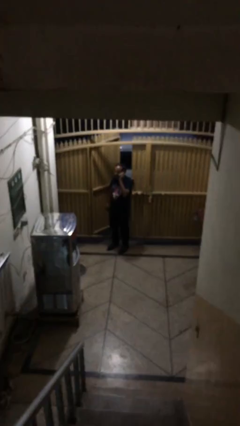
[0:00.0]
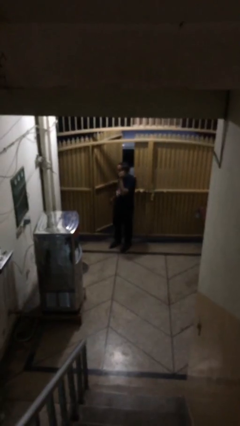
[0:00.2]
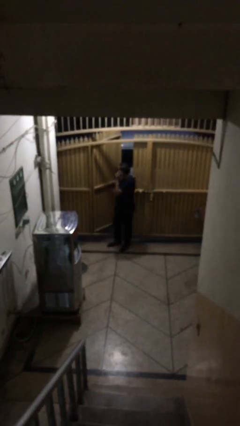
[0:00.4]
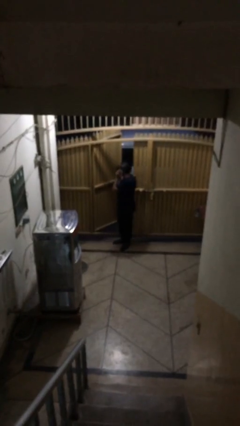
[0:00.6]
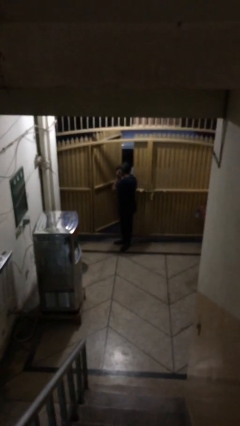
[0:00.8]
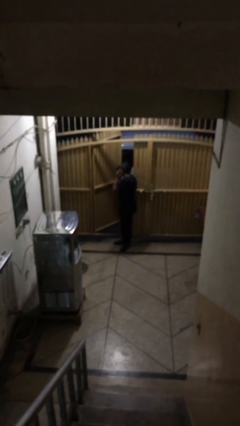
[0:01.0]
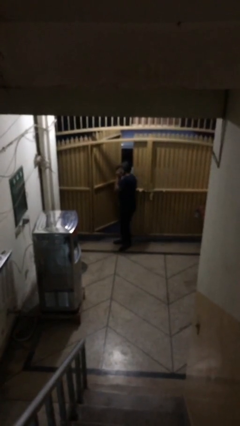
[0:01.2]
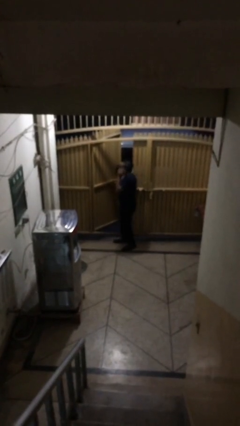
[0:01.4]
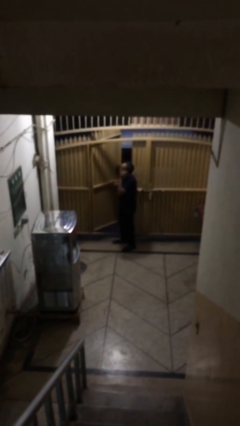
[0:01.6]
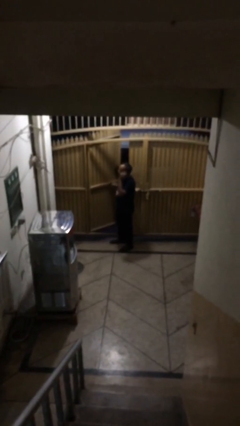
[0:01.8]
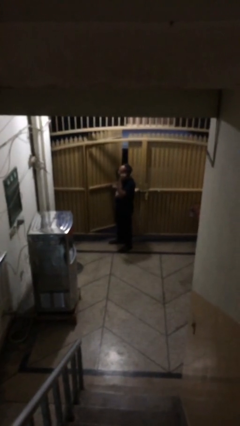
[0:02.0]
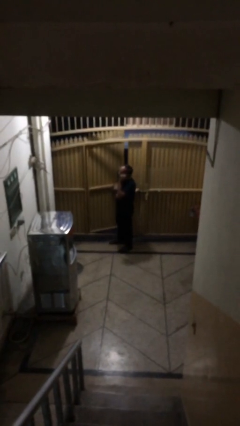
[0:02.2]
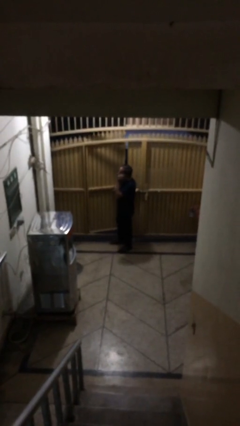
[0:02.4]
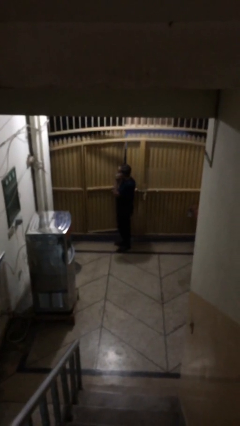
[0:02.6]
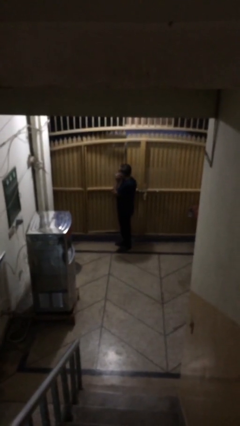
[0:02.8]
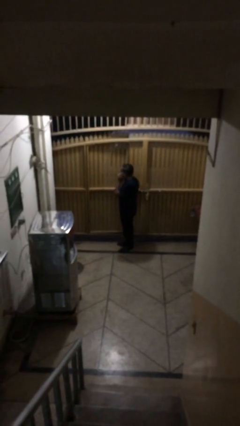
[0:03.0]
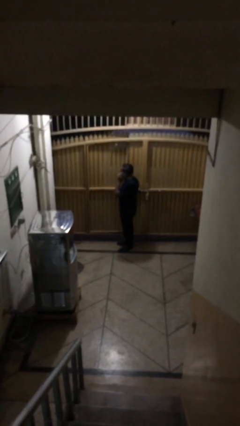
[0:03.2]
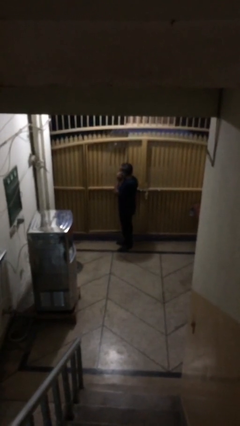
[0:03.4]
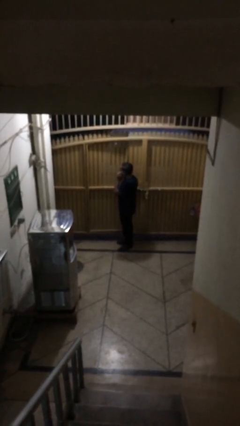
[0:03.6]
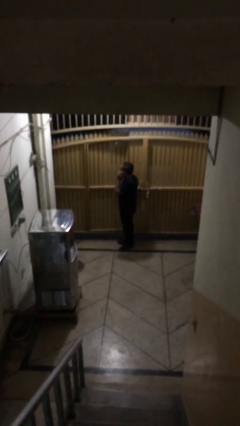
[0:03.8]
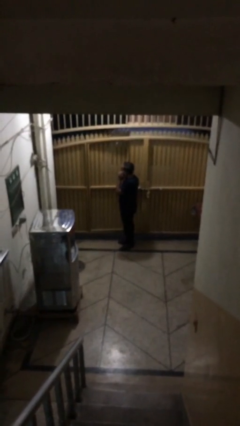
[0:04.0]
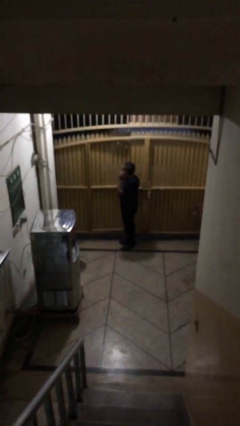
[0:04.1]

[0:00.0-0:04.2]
person closes facility door

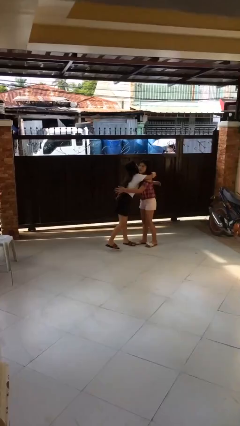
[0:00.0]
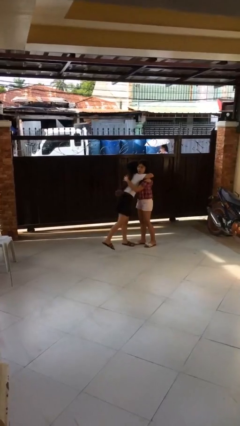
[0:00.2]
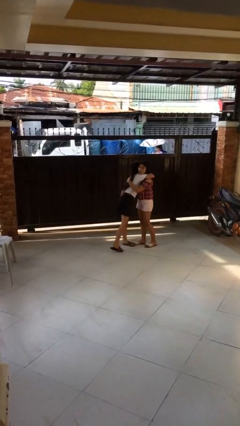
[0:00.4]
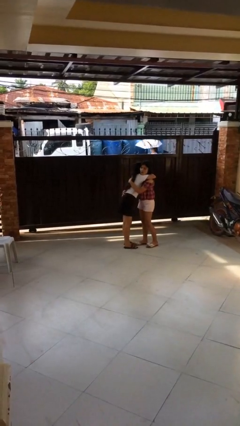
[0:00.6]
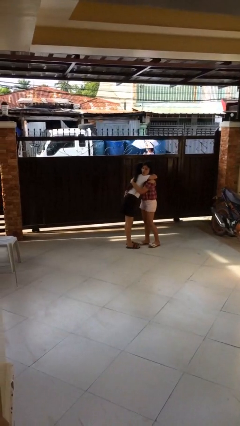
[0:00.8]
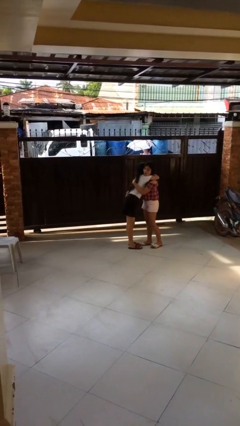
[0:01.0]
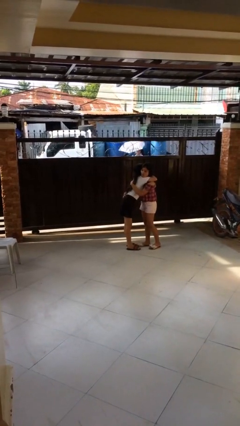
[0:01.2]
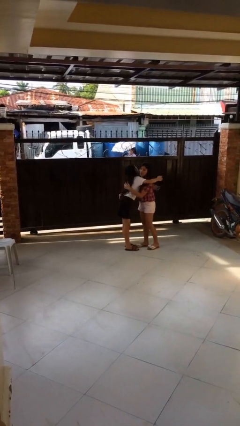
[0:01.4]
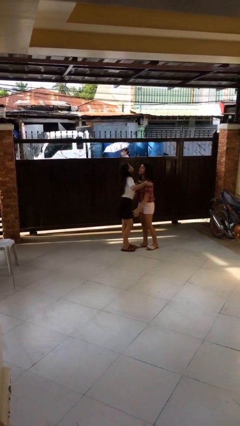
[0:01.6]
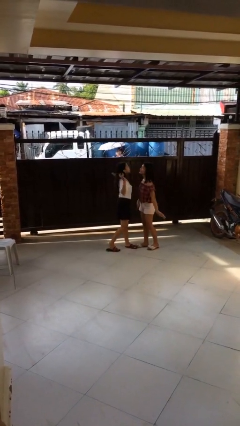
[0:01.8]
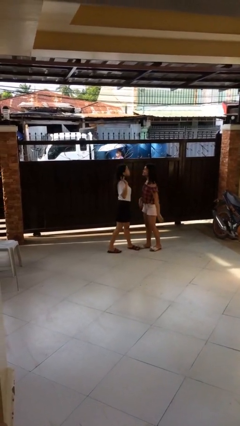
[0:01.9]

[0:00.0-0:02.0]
person embraces person

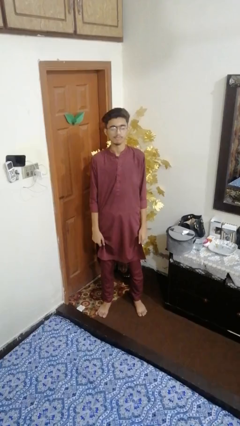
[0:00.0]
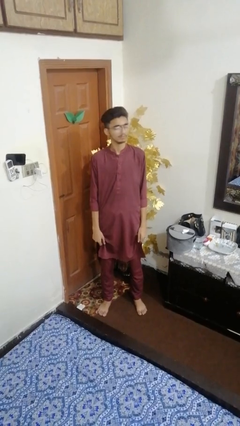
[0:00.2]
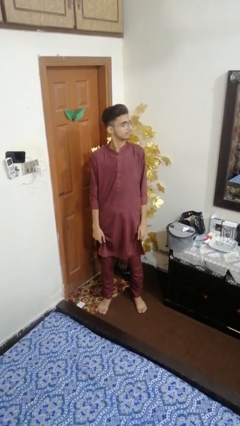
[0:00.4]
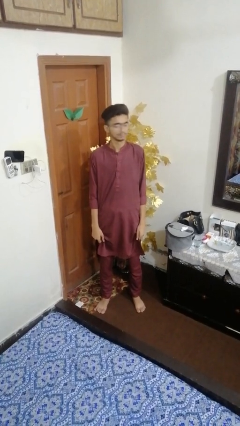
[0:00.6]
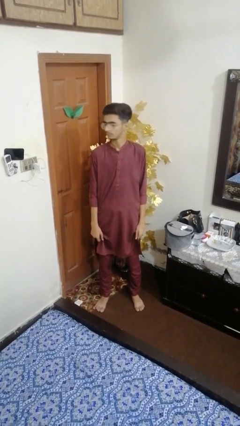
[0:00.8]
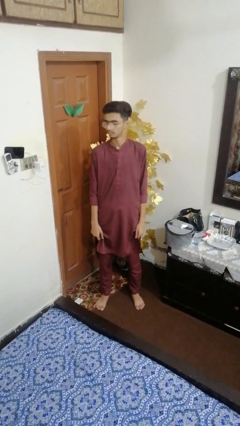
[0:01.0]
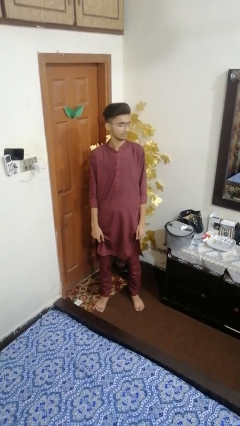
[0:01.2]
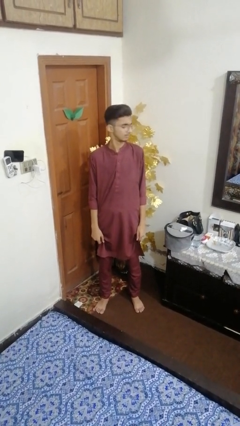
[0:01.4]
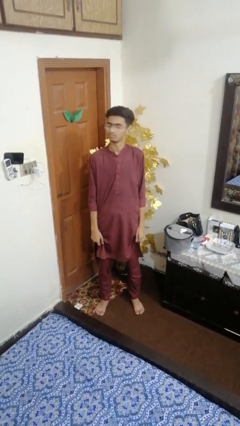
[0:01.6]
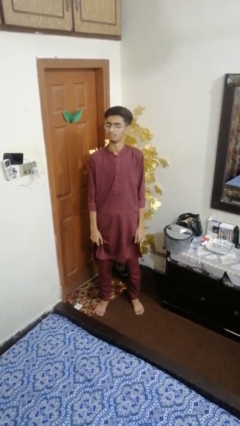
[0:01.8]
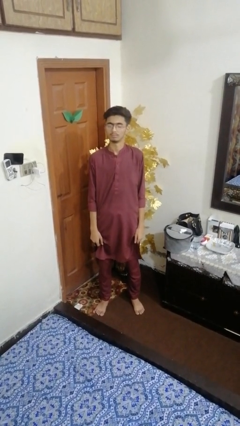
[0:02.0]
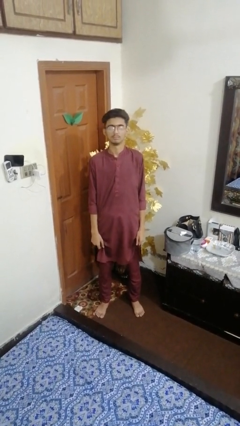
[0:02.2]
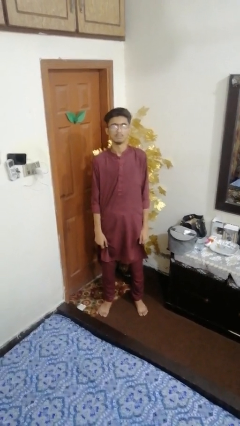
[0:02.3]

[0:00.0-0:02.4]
person shakes head

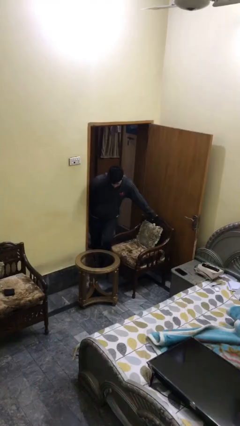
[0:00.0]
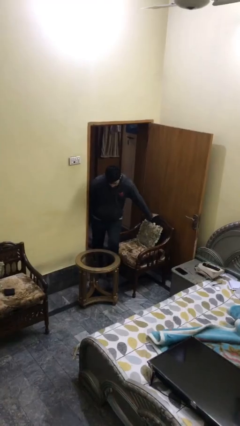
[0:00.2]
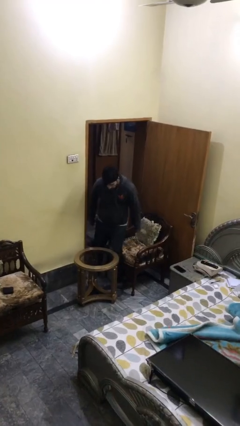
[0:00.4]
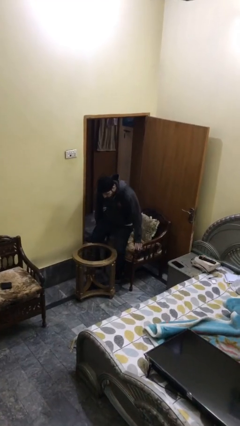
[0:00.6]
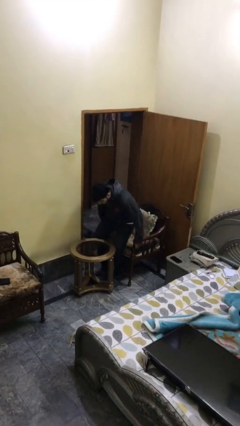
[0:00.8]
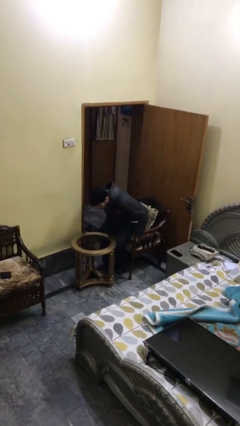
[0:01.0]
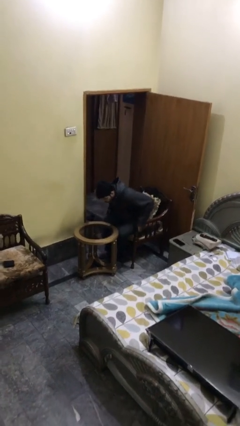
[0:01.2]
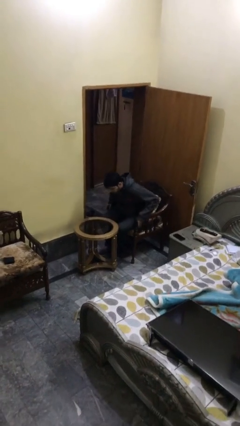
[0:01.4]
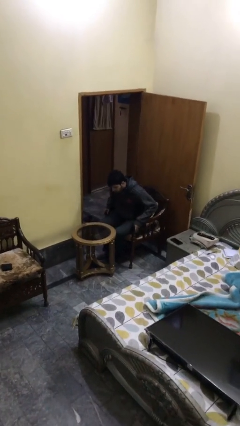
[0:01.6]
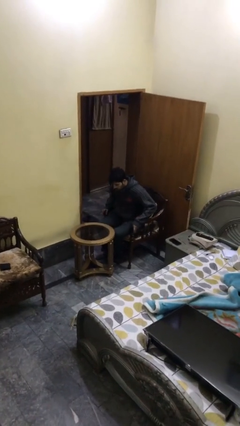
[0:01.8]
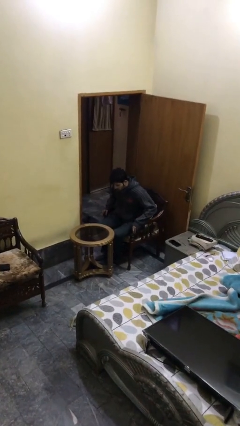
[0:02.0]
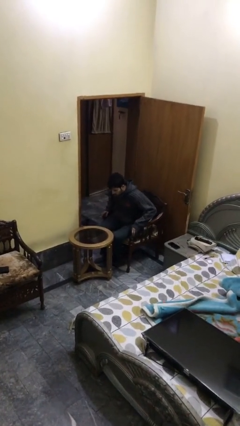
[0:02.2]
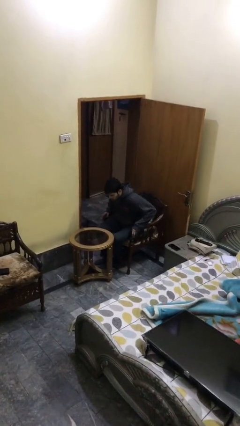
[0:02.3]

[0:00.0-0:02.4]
person sits down

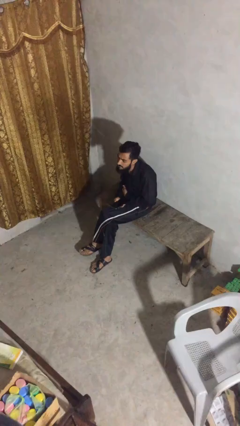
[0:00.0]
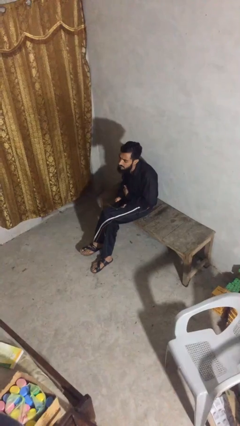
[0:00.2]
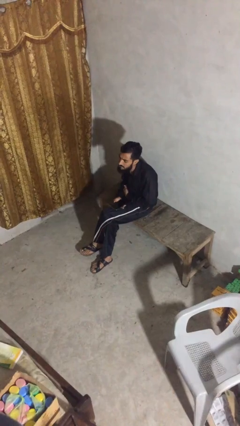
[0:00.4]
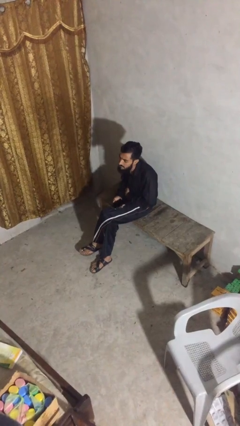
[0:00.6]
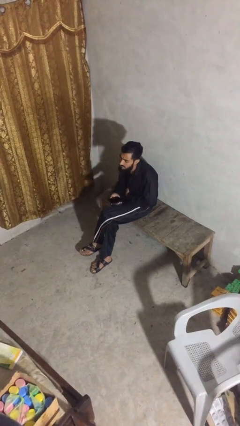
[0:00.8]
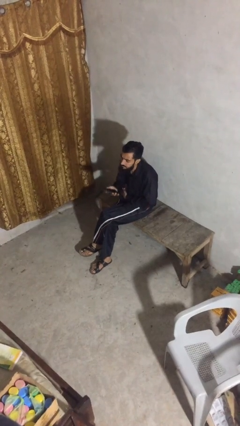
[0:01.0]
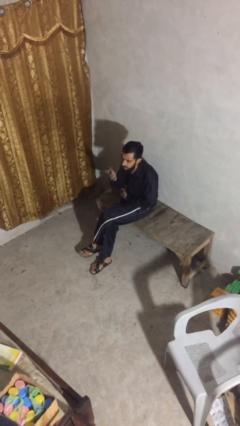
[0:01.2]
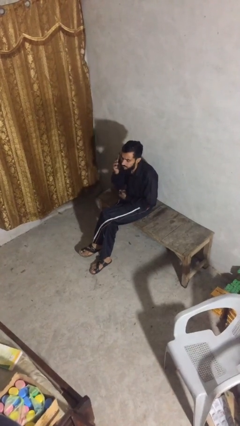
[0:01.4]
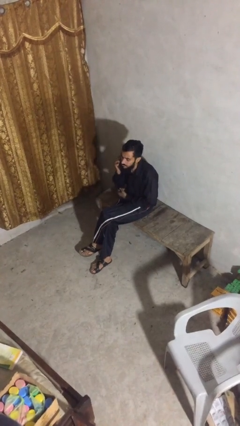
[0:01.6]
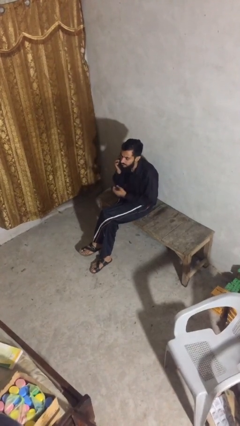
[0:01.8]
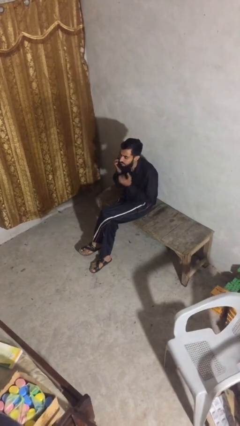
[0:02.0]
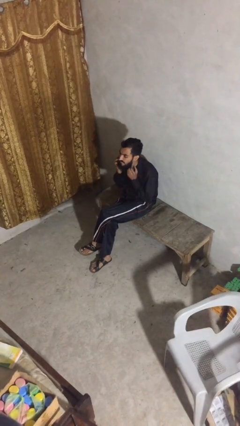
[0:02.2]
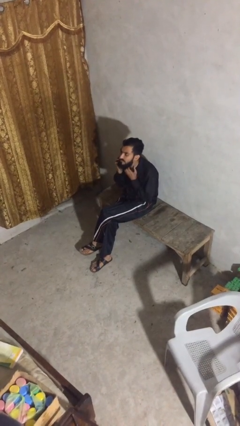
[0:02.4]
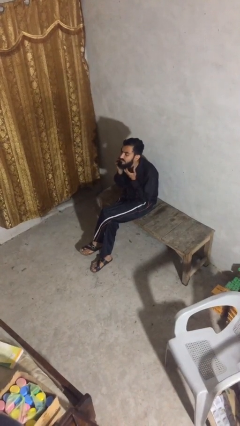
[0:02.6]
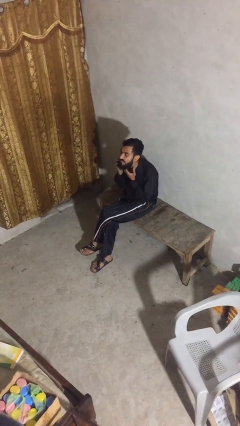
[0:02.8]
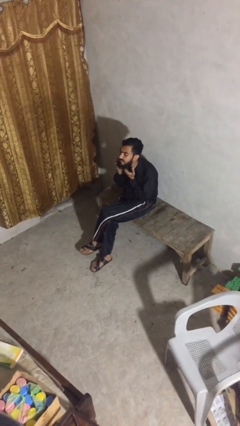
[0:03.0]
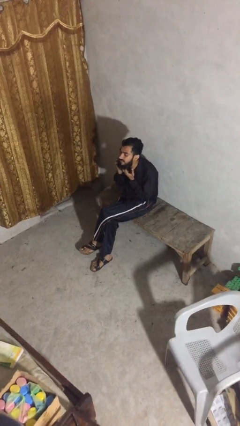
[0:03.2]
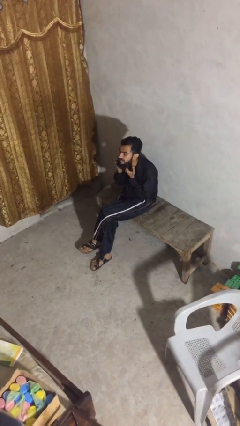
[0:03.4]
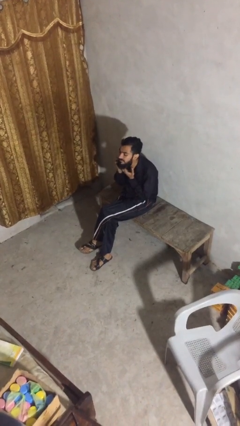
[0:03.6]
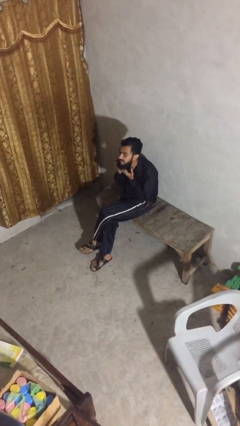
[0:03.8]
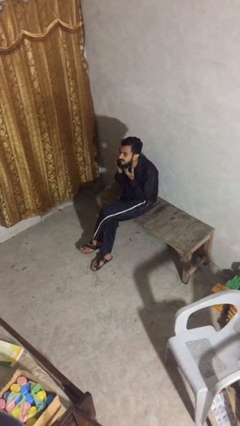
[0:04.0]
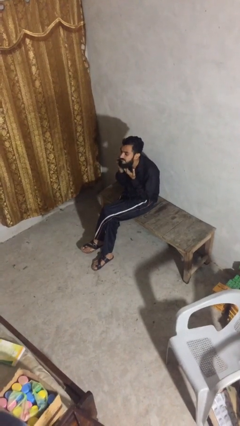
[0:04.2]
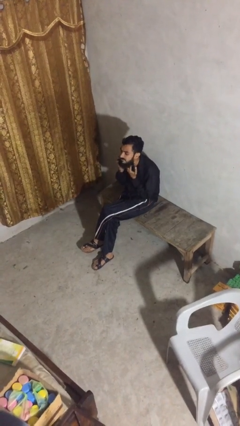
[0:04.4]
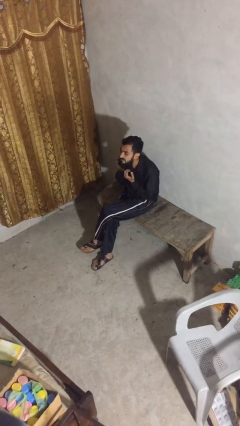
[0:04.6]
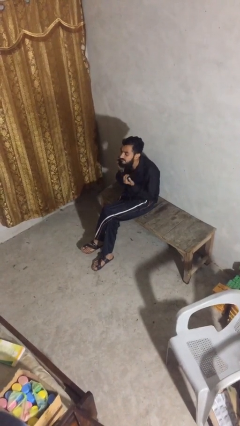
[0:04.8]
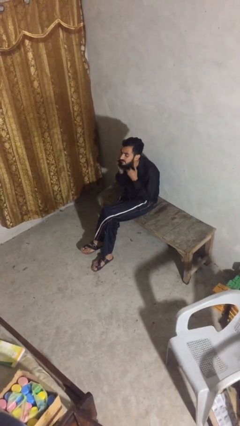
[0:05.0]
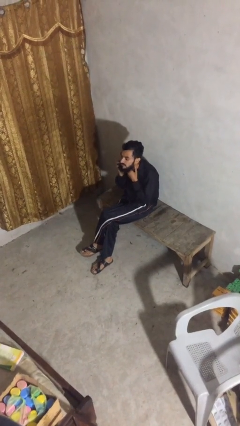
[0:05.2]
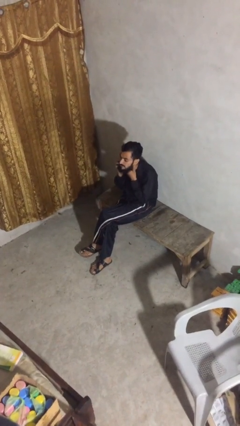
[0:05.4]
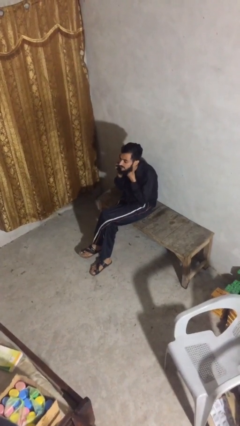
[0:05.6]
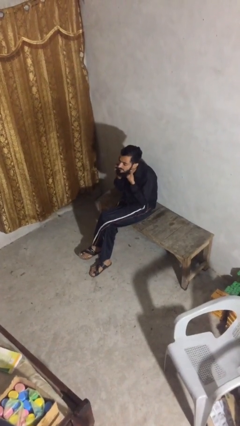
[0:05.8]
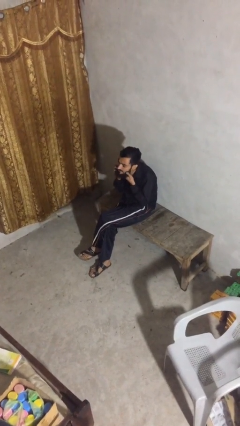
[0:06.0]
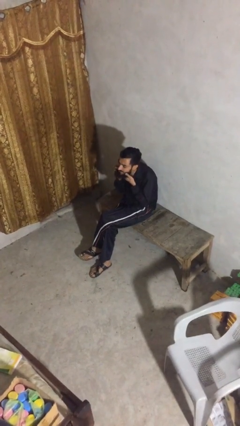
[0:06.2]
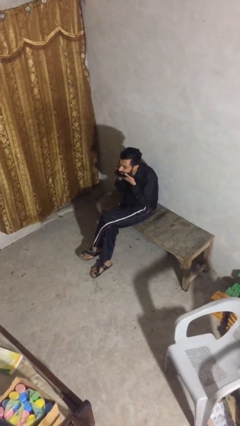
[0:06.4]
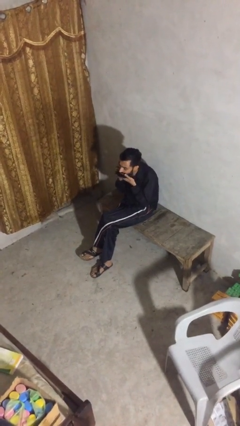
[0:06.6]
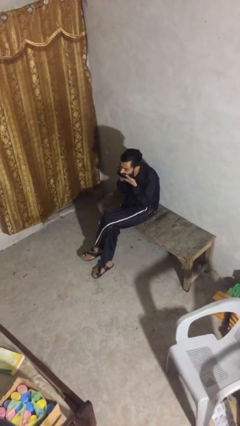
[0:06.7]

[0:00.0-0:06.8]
person talks on phone
